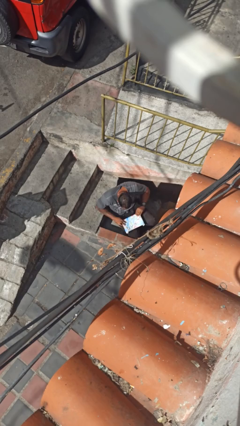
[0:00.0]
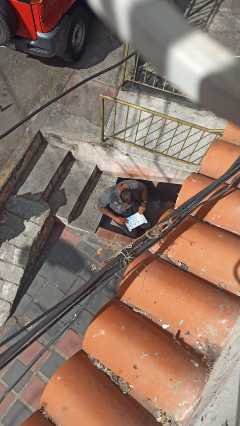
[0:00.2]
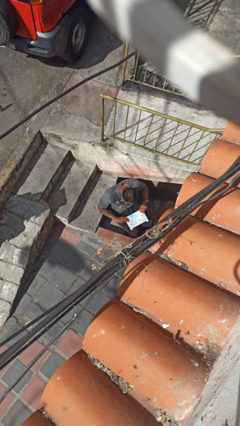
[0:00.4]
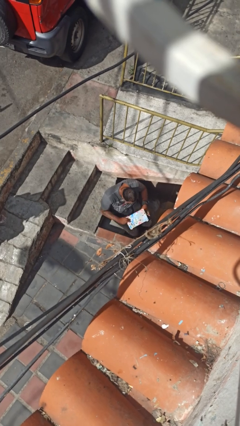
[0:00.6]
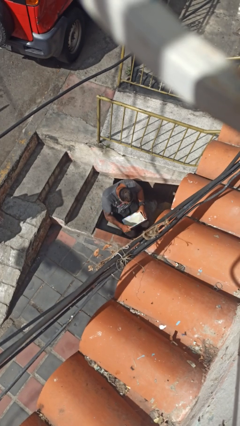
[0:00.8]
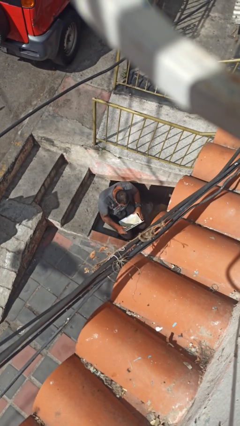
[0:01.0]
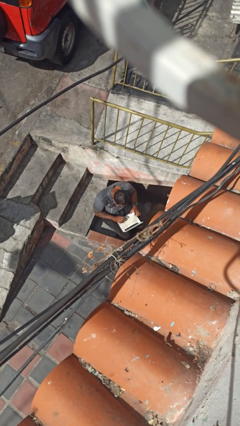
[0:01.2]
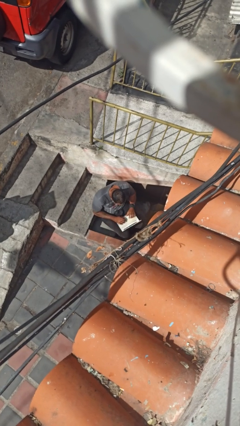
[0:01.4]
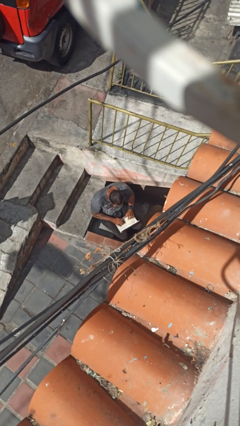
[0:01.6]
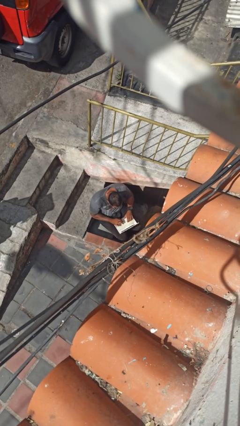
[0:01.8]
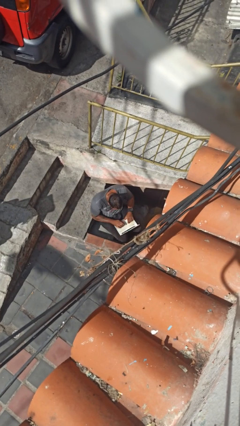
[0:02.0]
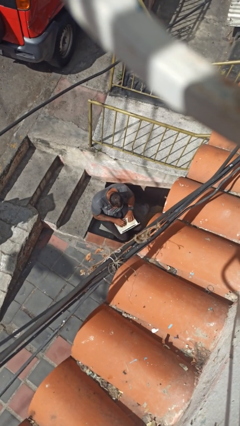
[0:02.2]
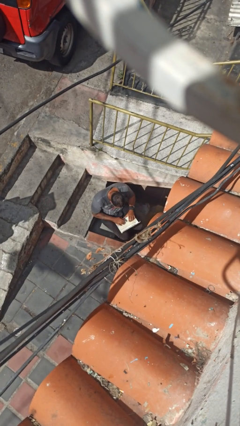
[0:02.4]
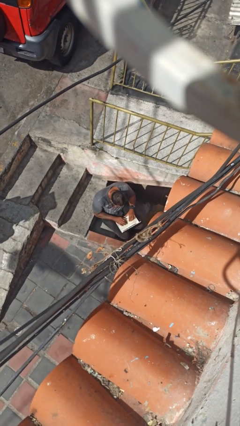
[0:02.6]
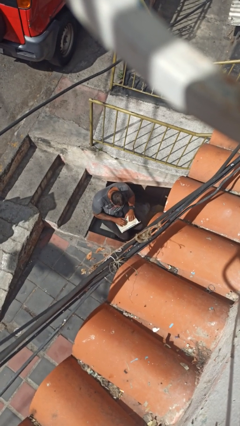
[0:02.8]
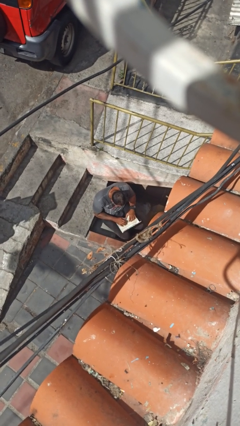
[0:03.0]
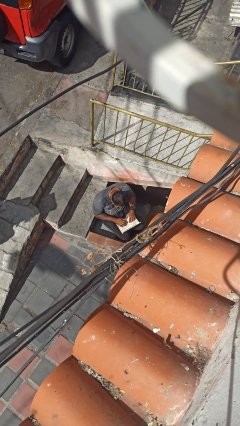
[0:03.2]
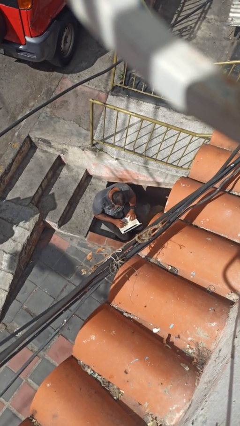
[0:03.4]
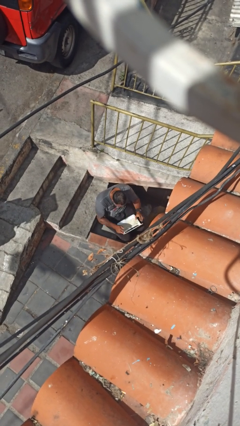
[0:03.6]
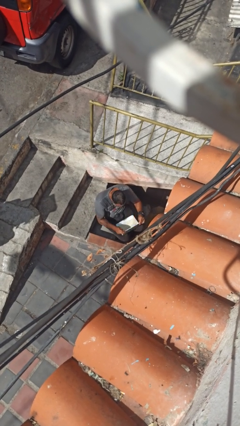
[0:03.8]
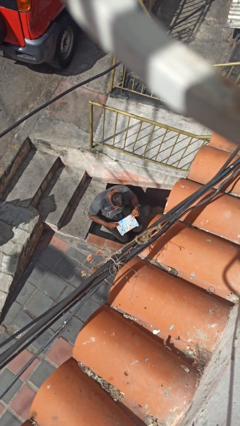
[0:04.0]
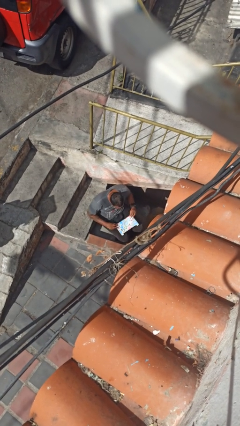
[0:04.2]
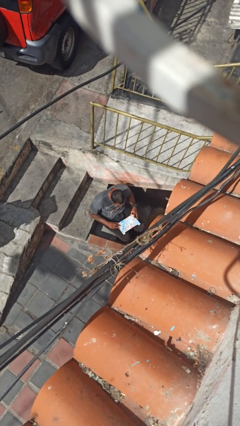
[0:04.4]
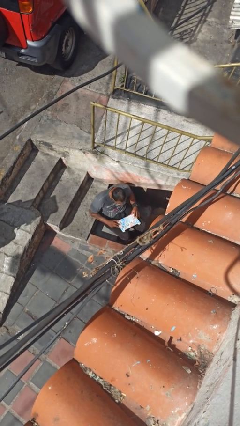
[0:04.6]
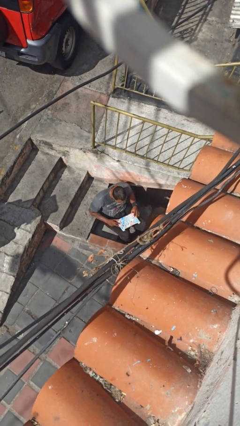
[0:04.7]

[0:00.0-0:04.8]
person interacts with laptop

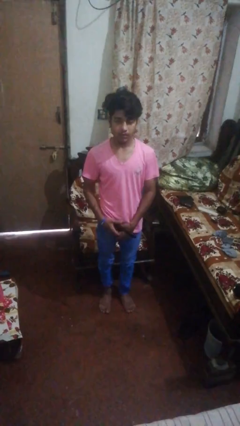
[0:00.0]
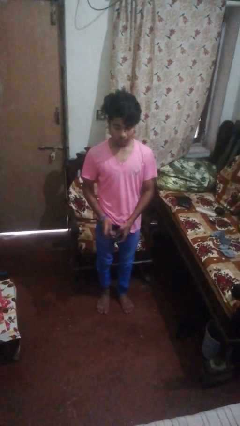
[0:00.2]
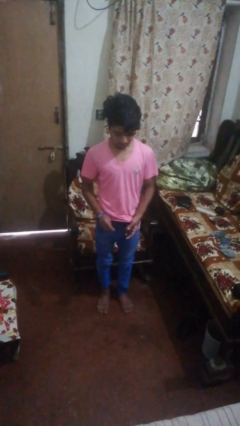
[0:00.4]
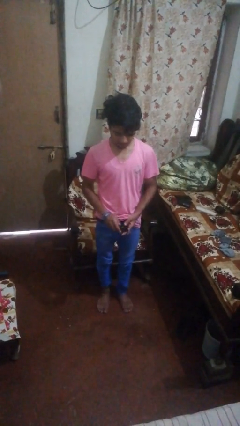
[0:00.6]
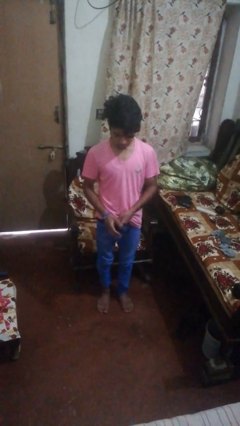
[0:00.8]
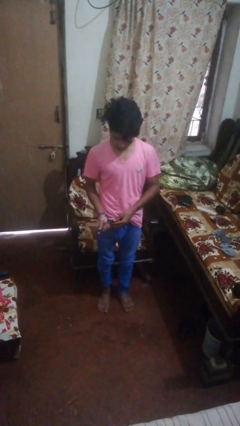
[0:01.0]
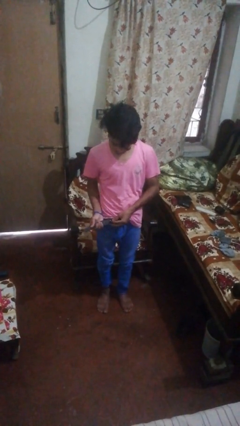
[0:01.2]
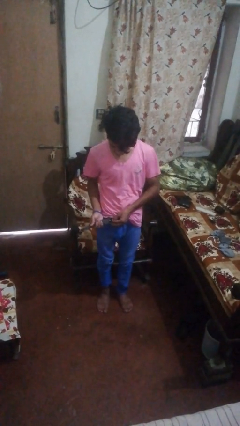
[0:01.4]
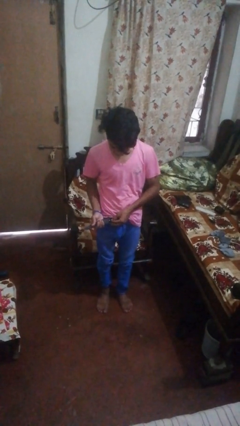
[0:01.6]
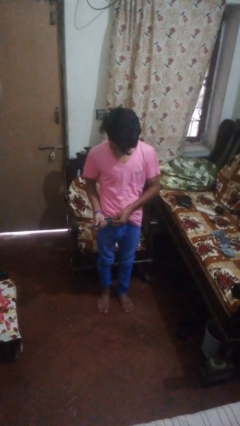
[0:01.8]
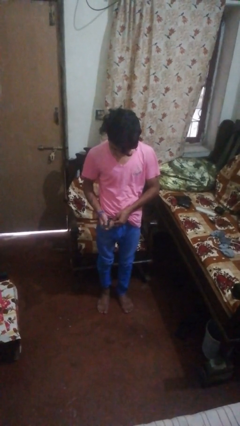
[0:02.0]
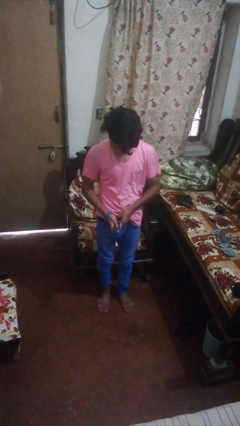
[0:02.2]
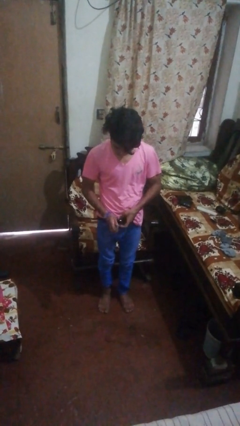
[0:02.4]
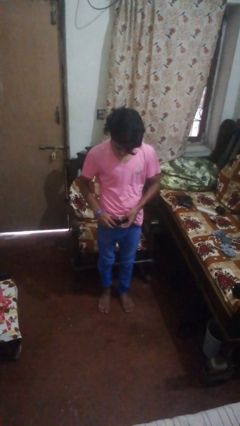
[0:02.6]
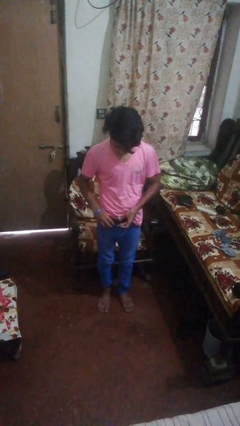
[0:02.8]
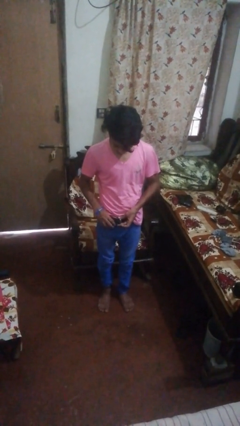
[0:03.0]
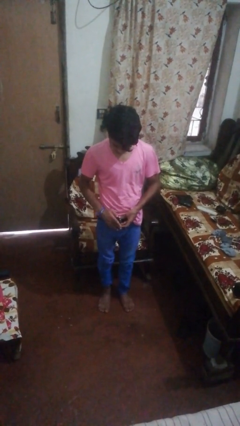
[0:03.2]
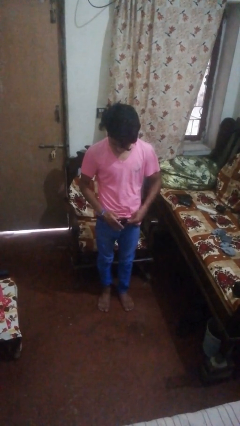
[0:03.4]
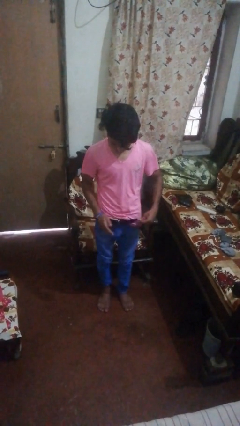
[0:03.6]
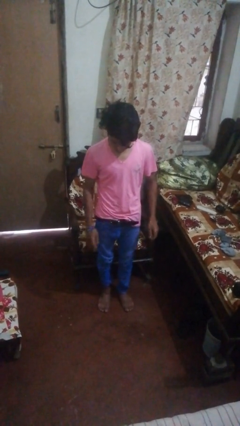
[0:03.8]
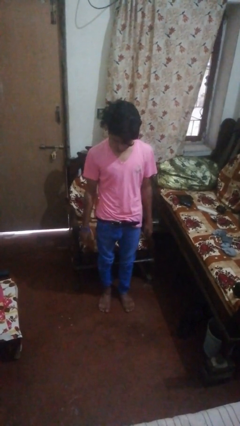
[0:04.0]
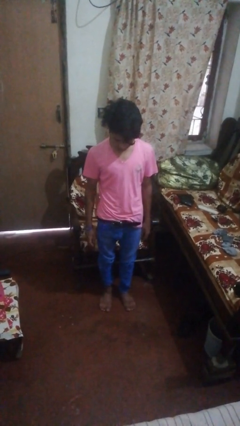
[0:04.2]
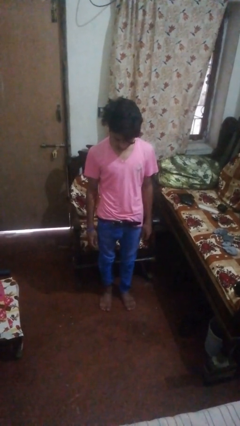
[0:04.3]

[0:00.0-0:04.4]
person puts on belt

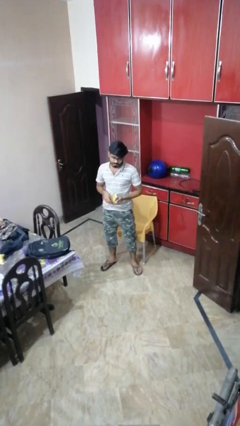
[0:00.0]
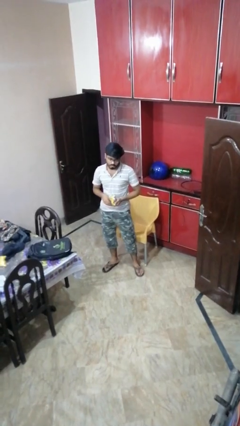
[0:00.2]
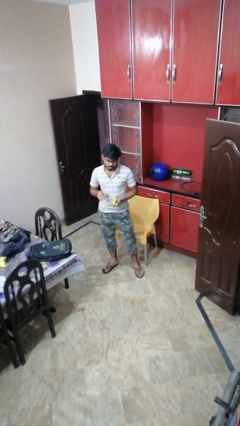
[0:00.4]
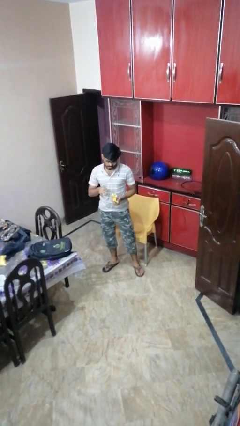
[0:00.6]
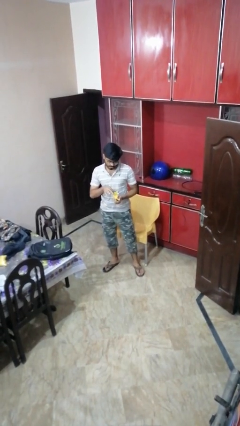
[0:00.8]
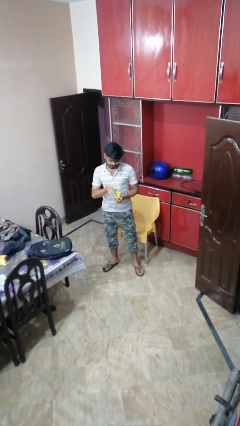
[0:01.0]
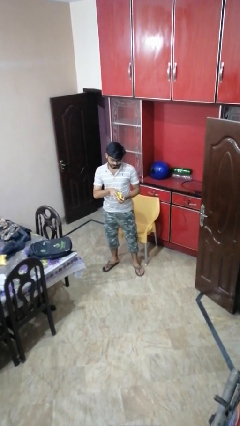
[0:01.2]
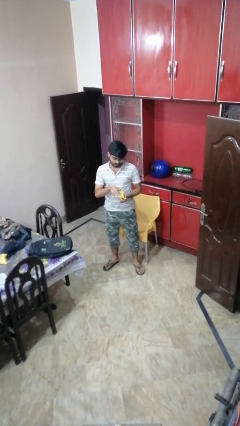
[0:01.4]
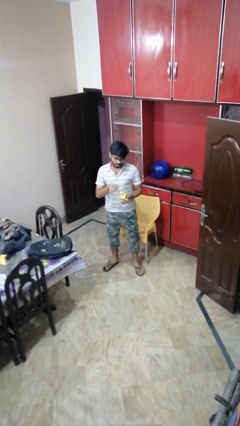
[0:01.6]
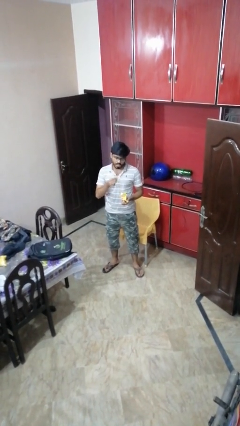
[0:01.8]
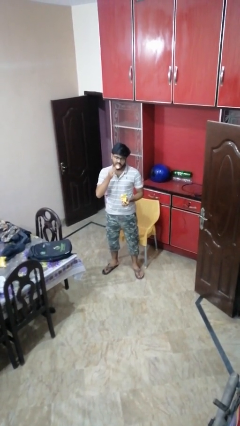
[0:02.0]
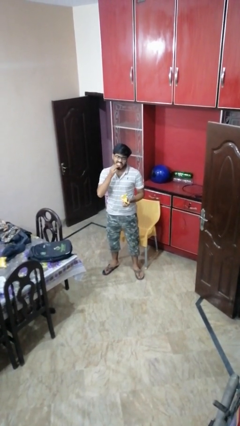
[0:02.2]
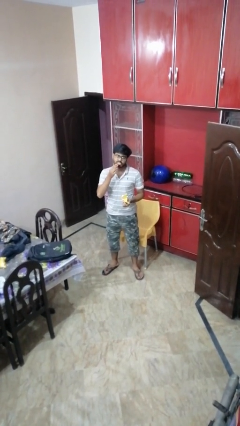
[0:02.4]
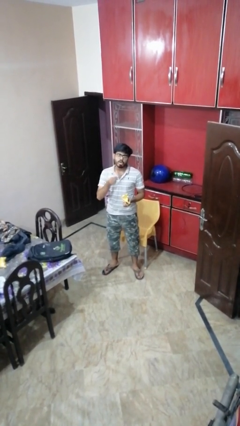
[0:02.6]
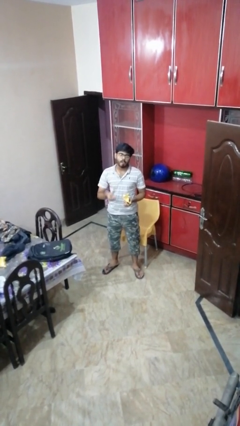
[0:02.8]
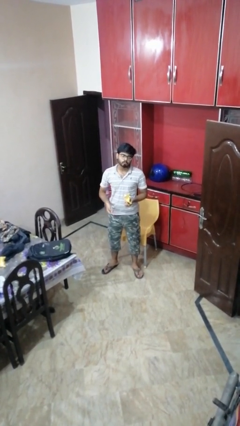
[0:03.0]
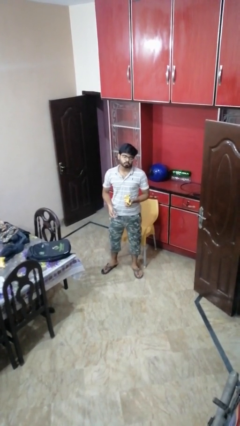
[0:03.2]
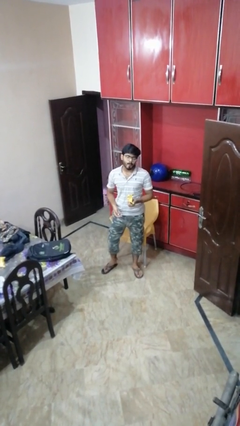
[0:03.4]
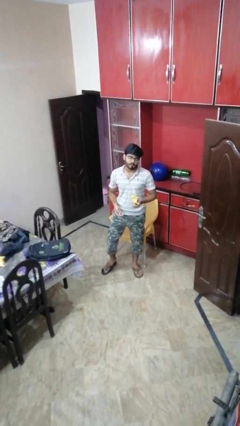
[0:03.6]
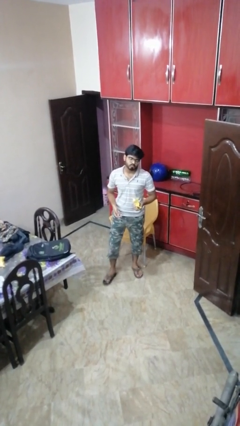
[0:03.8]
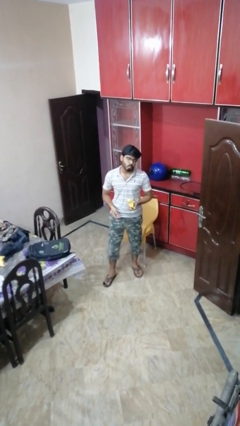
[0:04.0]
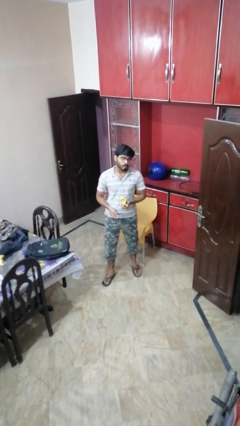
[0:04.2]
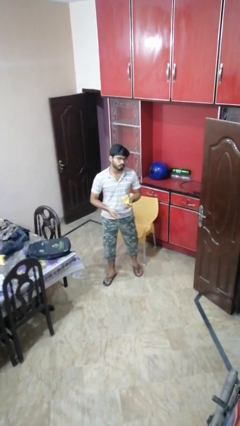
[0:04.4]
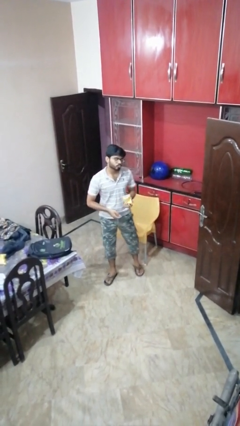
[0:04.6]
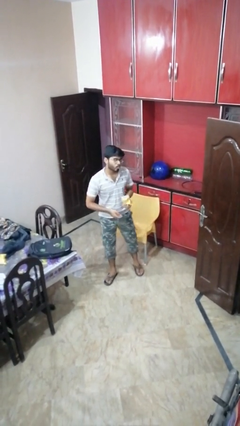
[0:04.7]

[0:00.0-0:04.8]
person eats snack from bag

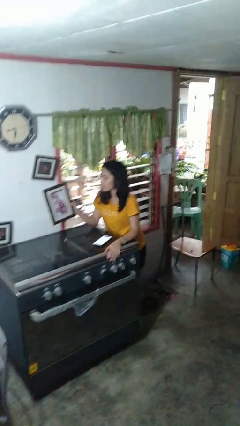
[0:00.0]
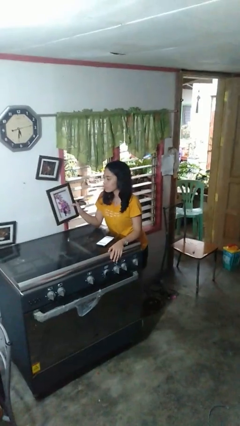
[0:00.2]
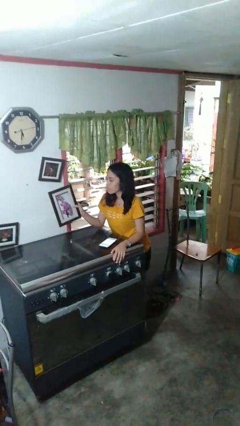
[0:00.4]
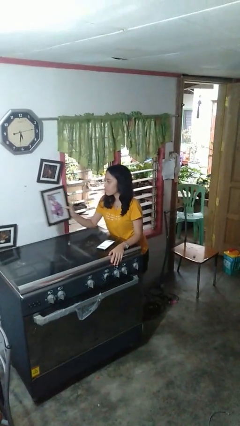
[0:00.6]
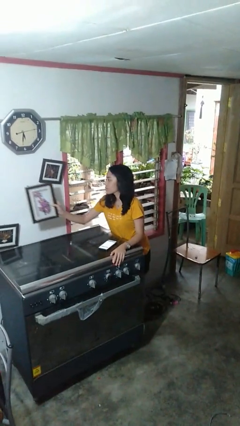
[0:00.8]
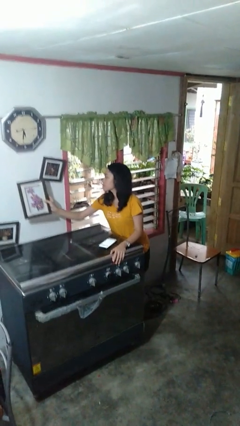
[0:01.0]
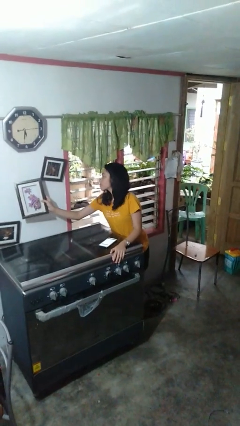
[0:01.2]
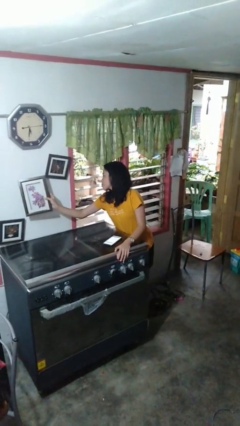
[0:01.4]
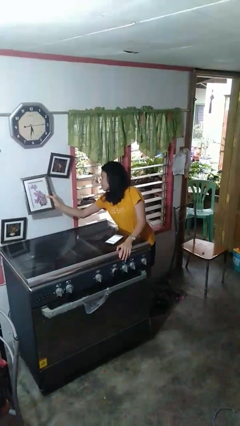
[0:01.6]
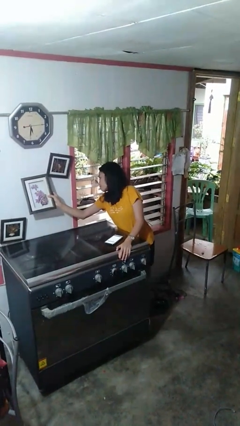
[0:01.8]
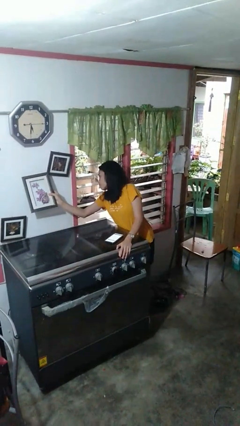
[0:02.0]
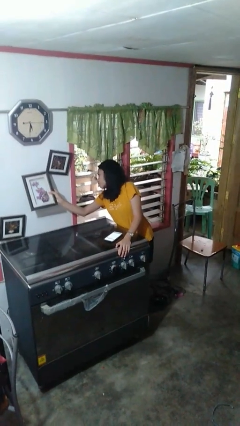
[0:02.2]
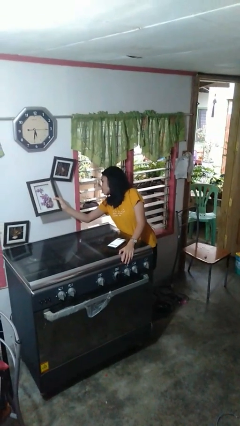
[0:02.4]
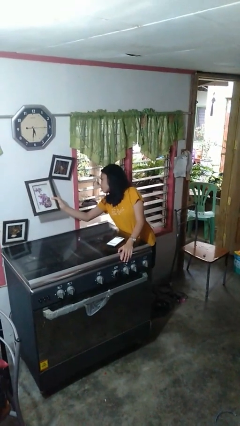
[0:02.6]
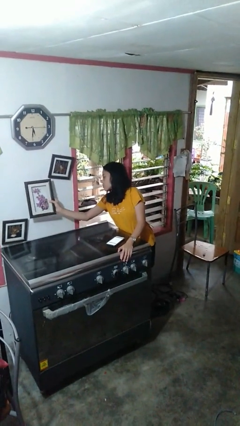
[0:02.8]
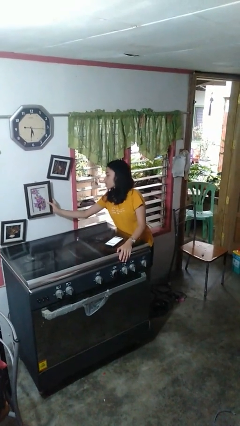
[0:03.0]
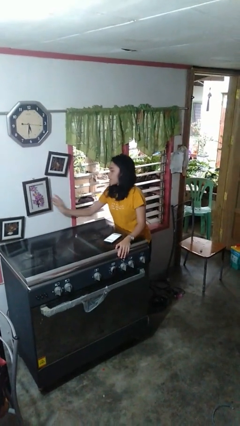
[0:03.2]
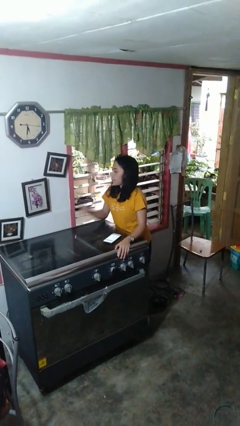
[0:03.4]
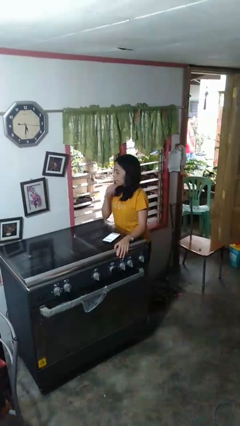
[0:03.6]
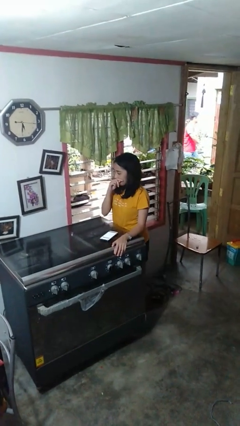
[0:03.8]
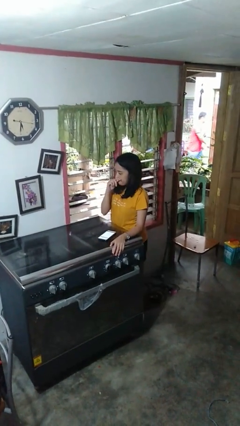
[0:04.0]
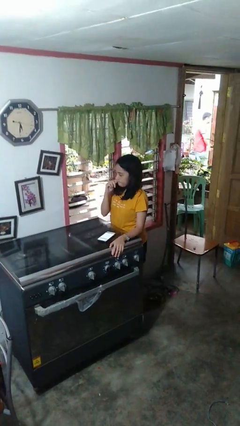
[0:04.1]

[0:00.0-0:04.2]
person puts up picture frame
